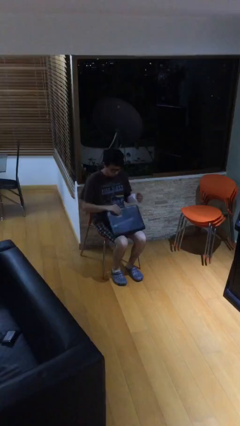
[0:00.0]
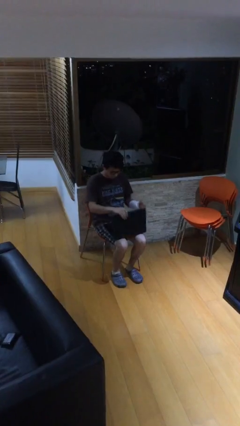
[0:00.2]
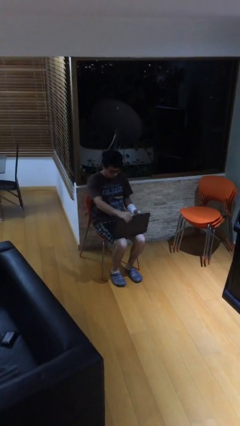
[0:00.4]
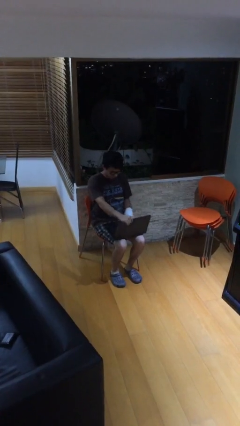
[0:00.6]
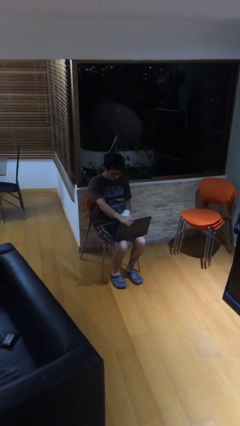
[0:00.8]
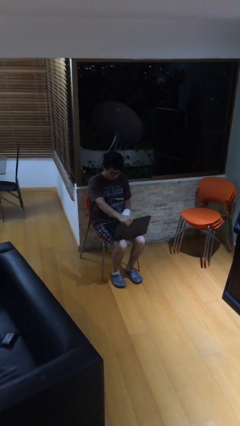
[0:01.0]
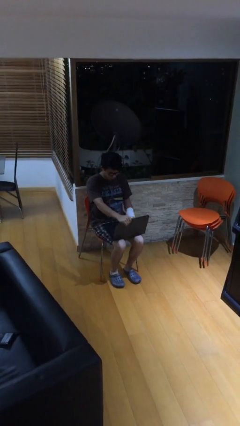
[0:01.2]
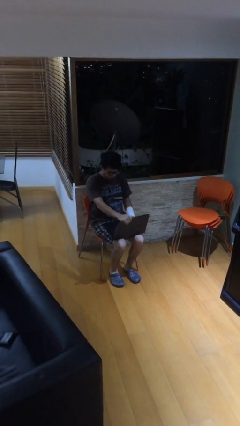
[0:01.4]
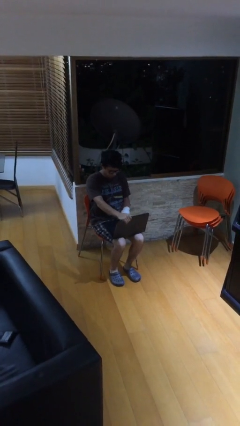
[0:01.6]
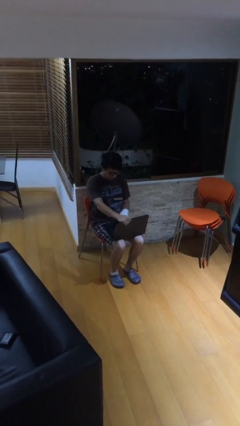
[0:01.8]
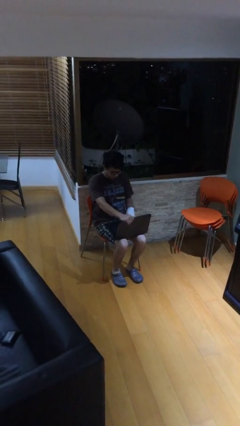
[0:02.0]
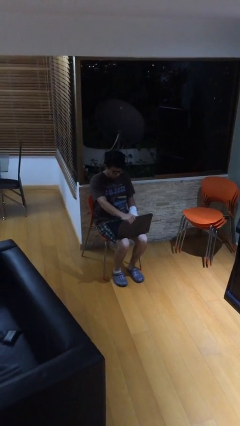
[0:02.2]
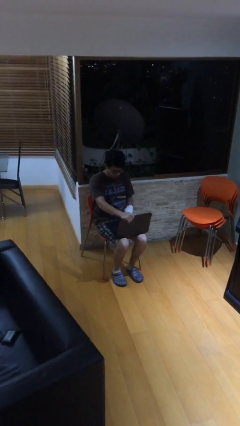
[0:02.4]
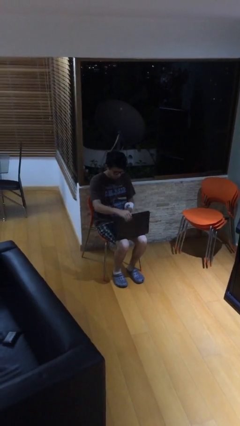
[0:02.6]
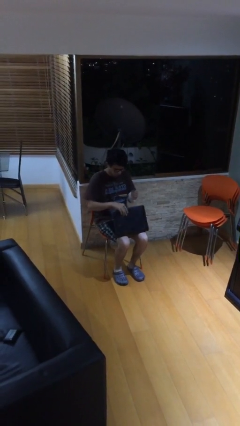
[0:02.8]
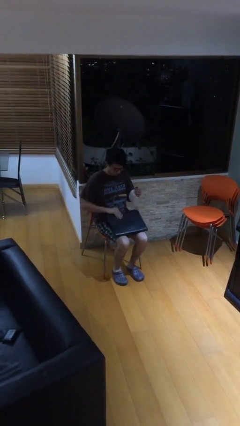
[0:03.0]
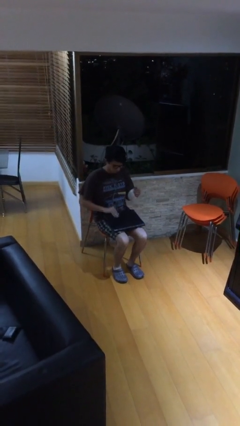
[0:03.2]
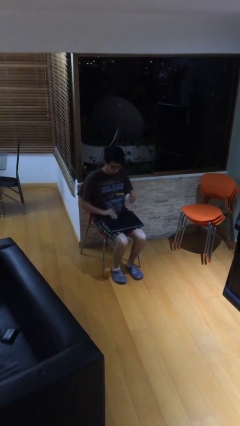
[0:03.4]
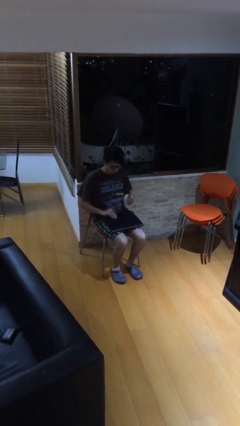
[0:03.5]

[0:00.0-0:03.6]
person interacts with laptop

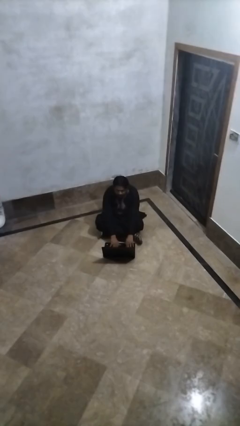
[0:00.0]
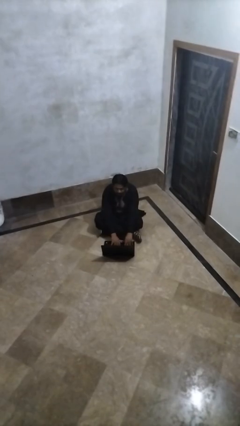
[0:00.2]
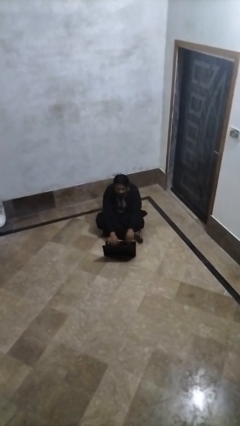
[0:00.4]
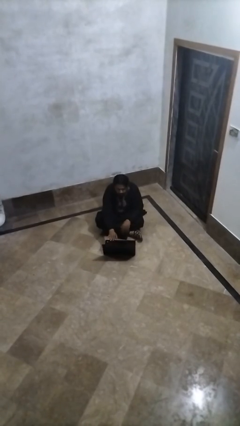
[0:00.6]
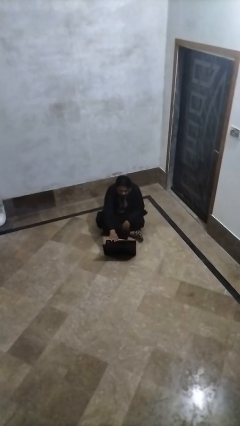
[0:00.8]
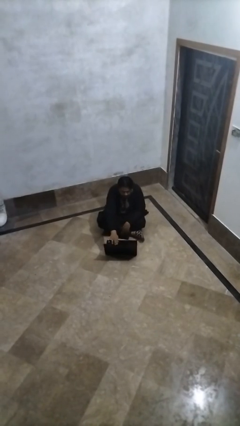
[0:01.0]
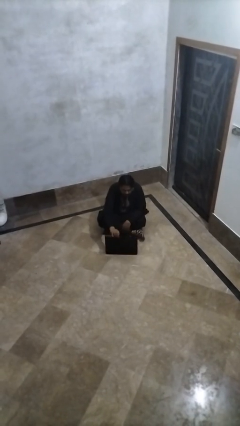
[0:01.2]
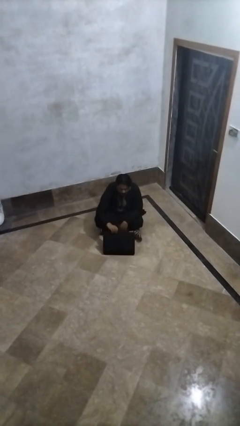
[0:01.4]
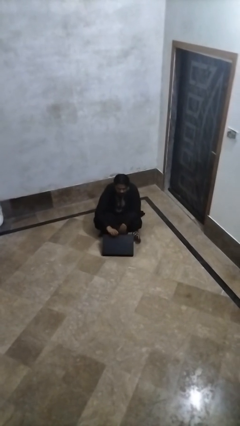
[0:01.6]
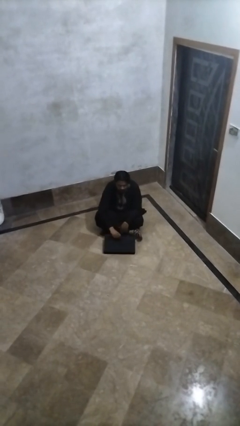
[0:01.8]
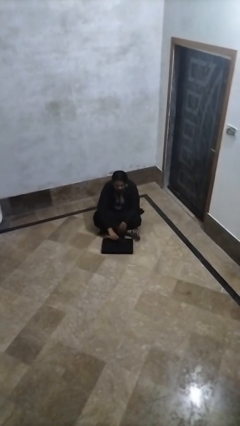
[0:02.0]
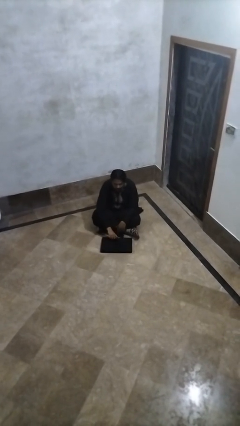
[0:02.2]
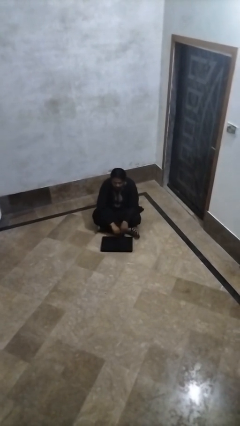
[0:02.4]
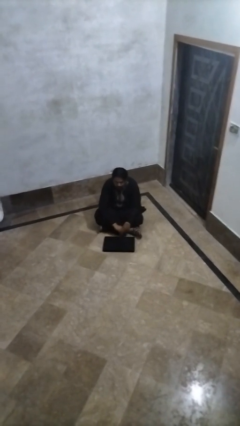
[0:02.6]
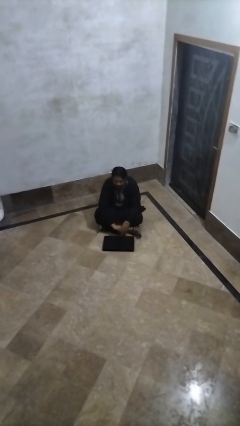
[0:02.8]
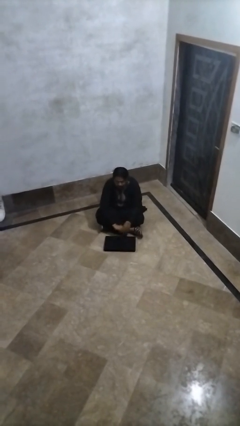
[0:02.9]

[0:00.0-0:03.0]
person closes laptop

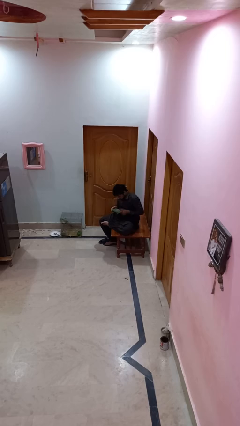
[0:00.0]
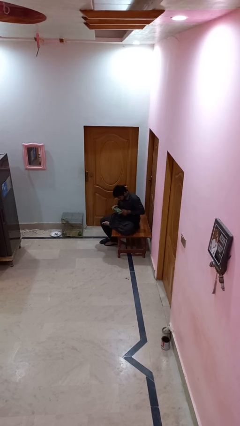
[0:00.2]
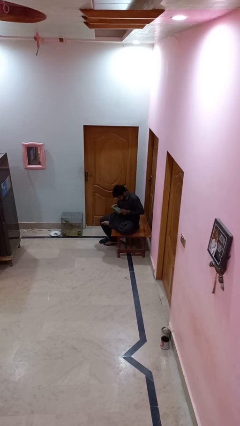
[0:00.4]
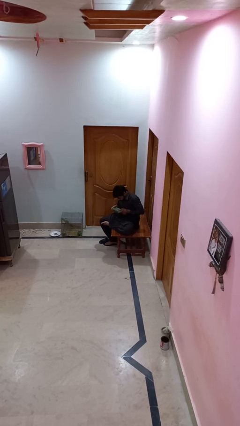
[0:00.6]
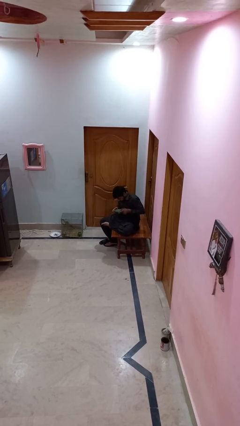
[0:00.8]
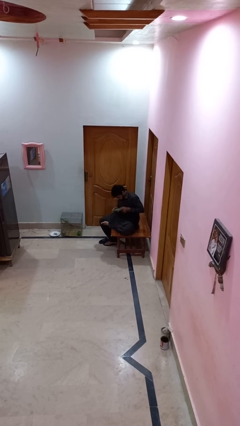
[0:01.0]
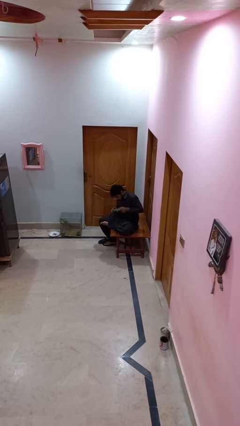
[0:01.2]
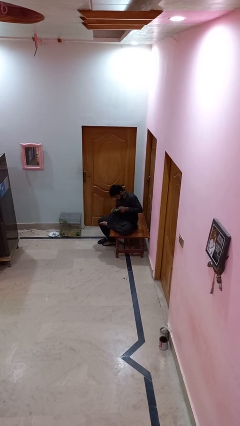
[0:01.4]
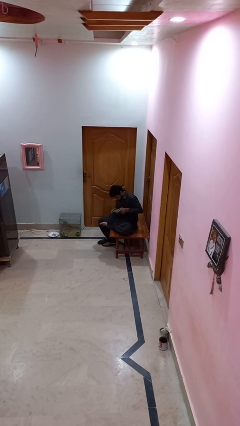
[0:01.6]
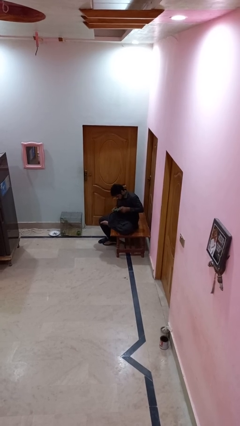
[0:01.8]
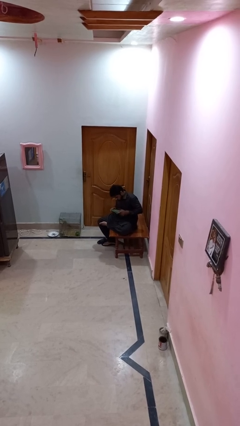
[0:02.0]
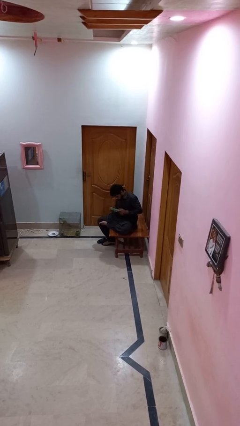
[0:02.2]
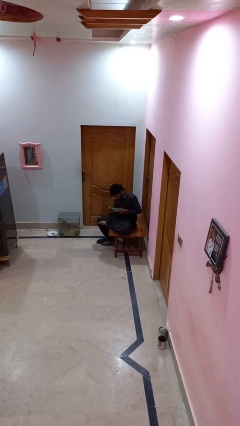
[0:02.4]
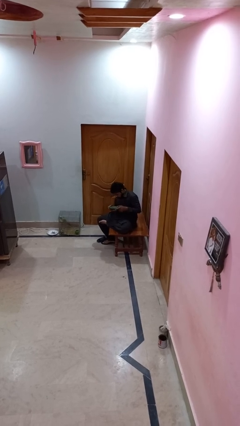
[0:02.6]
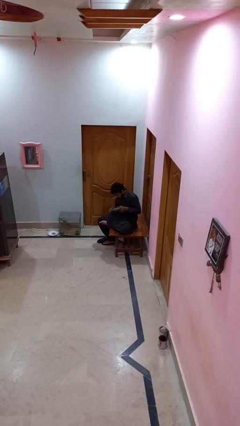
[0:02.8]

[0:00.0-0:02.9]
person interacts with handheld game

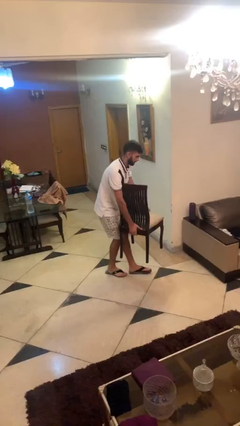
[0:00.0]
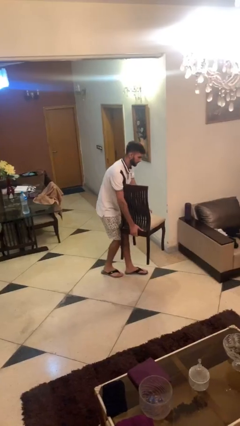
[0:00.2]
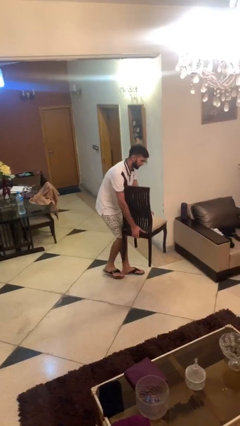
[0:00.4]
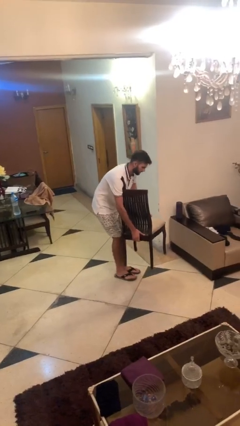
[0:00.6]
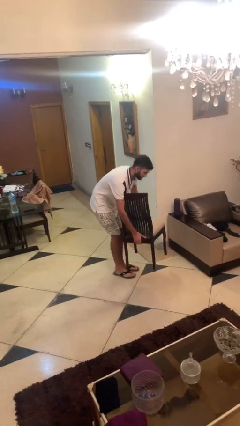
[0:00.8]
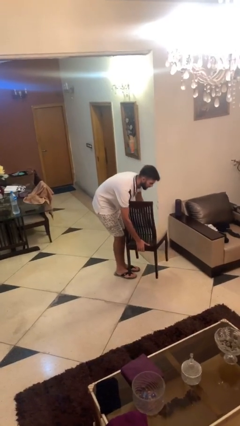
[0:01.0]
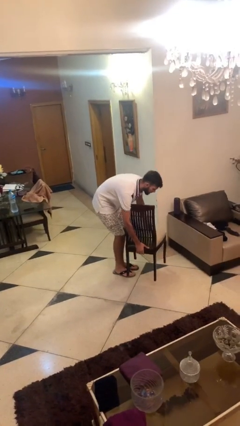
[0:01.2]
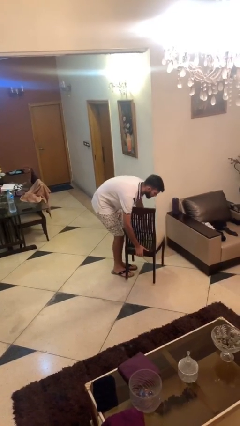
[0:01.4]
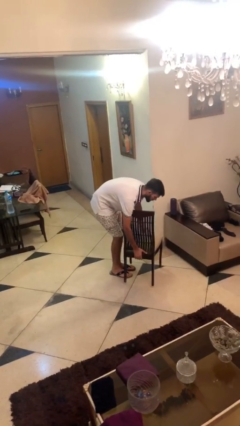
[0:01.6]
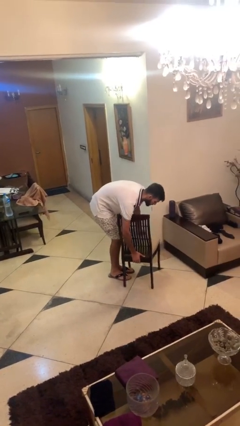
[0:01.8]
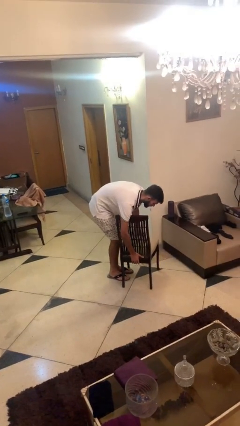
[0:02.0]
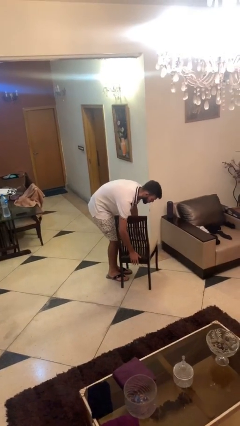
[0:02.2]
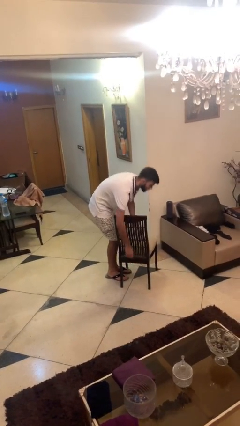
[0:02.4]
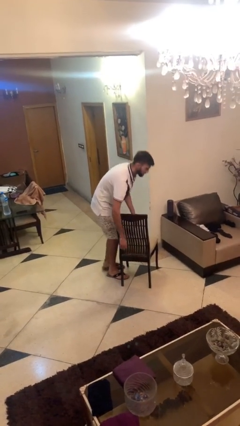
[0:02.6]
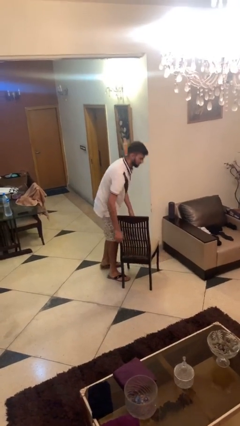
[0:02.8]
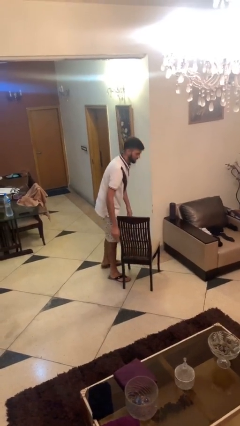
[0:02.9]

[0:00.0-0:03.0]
person puts down object on floor

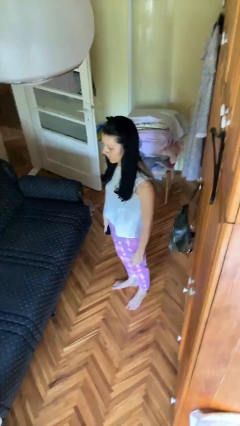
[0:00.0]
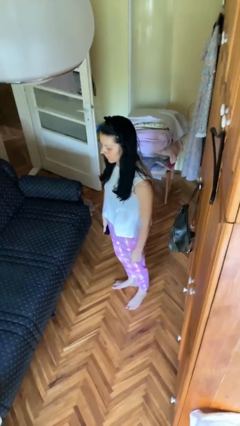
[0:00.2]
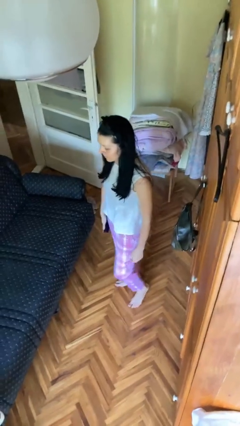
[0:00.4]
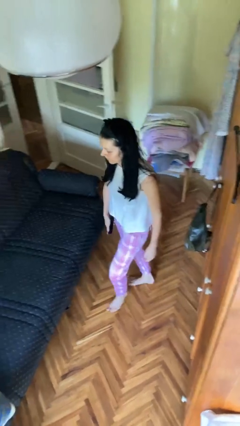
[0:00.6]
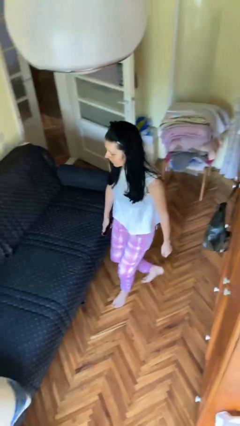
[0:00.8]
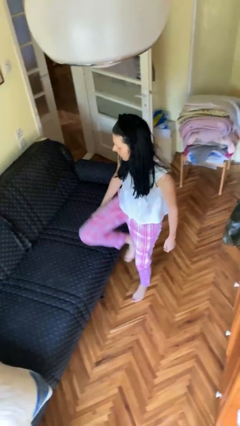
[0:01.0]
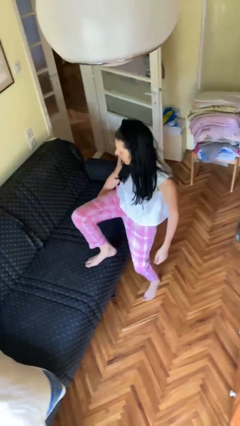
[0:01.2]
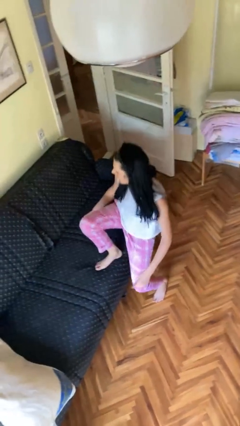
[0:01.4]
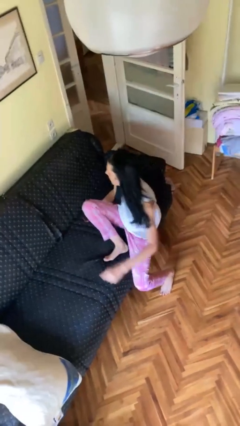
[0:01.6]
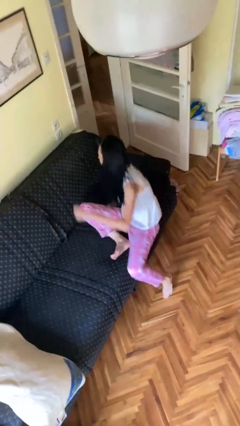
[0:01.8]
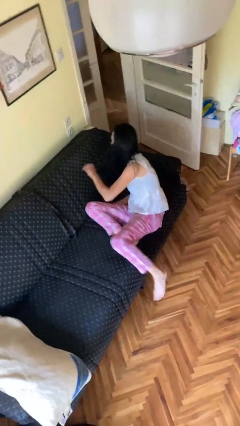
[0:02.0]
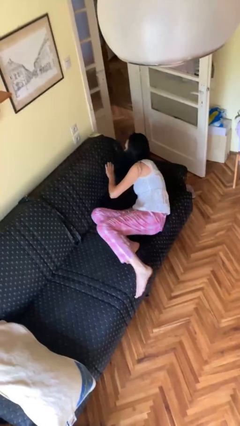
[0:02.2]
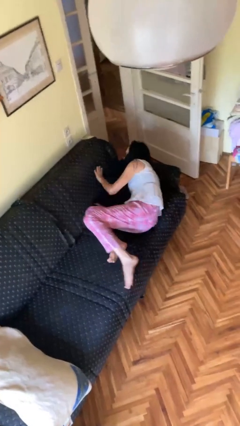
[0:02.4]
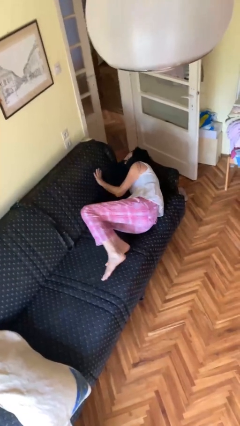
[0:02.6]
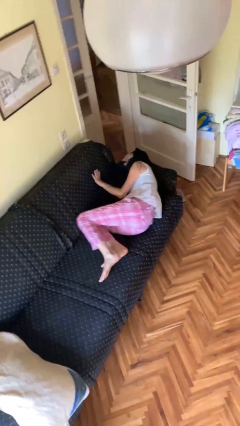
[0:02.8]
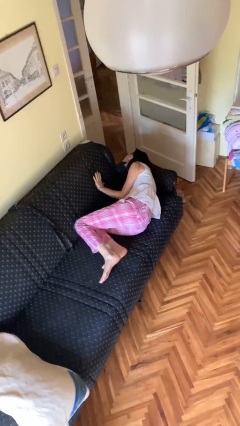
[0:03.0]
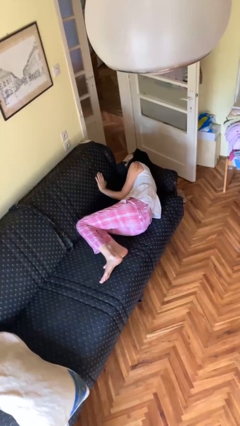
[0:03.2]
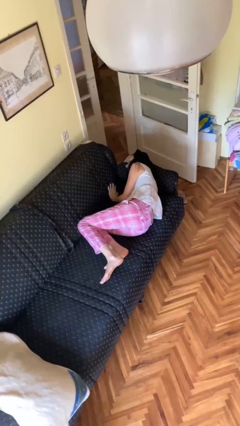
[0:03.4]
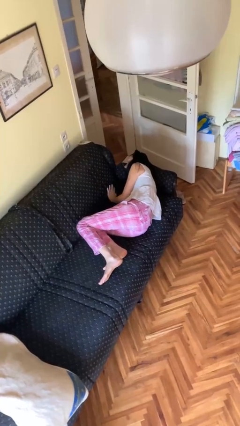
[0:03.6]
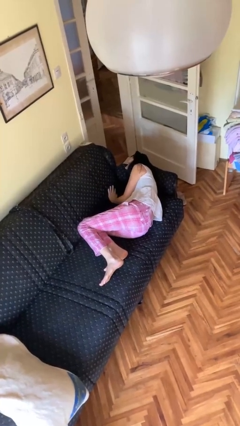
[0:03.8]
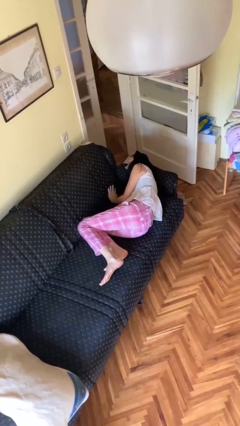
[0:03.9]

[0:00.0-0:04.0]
person lies down on couch

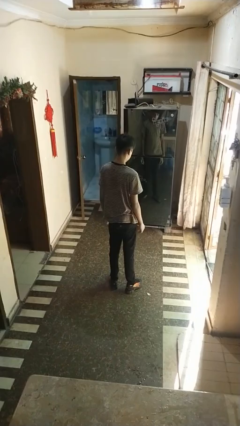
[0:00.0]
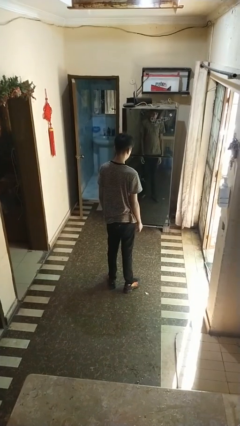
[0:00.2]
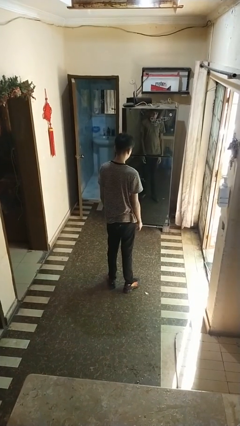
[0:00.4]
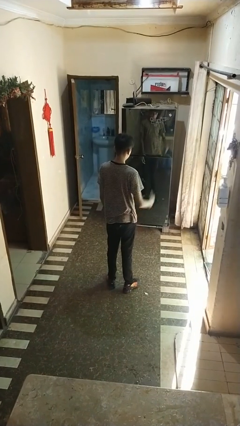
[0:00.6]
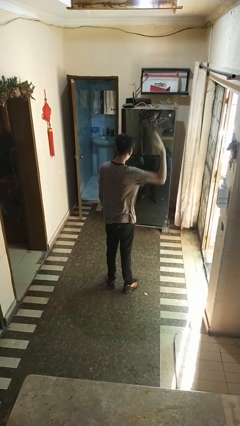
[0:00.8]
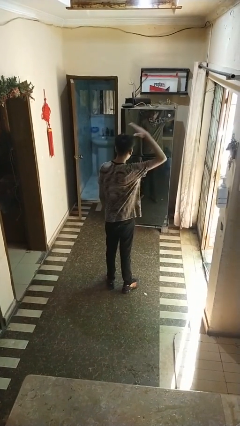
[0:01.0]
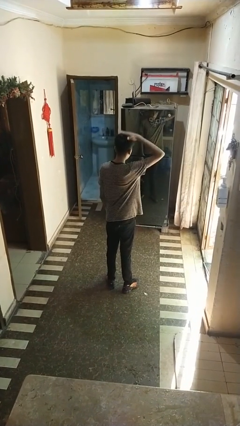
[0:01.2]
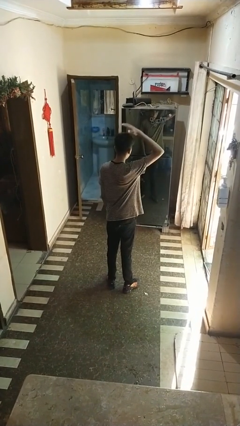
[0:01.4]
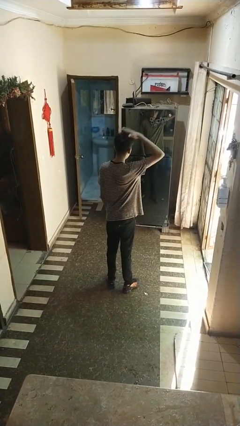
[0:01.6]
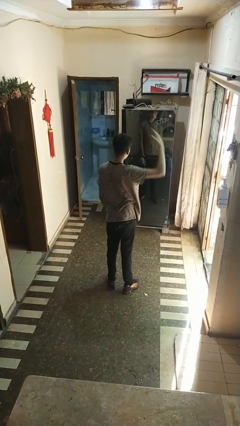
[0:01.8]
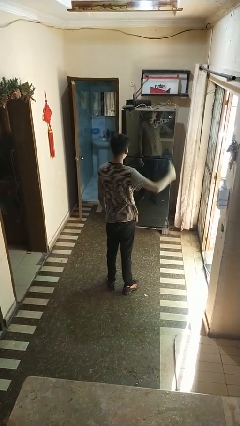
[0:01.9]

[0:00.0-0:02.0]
person pats head
